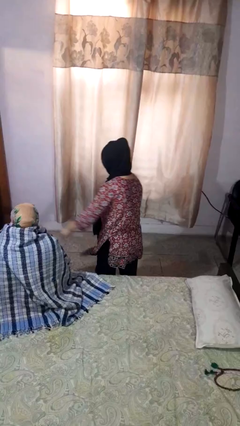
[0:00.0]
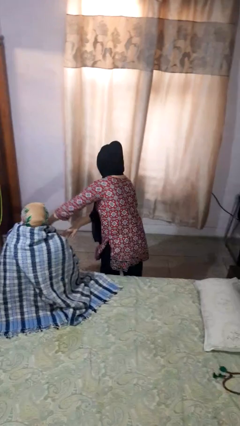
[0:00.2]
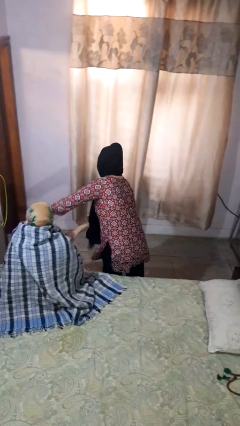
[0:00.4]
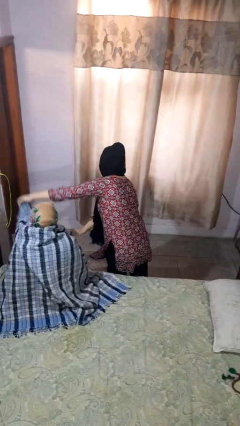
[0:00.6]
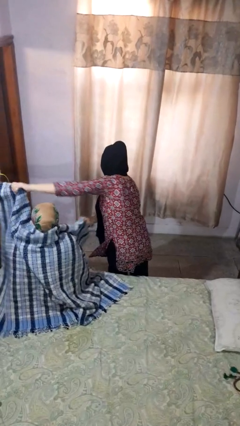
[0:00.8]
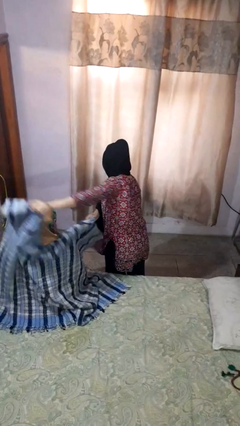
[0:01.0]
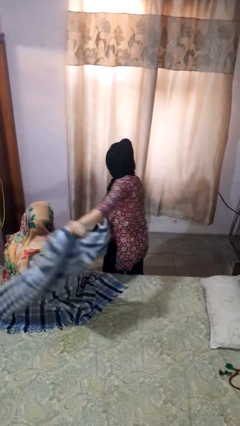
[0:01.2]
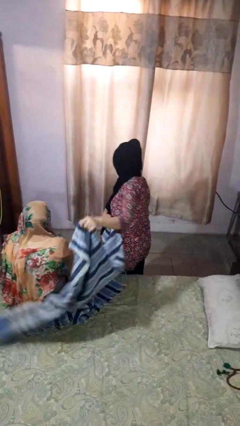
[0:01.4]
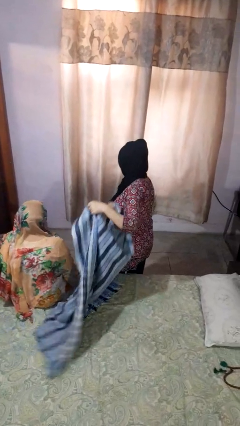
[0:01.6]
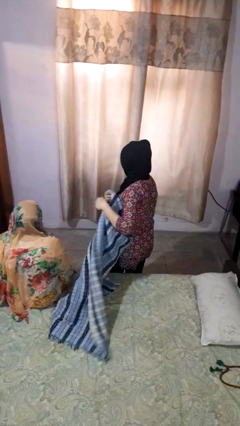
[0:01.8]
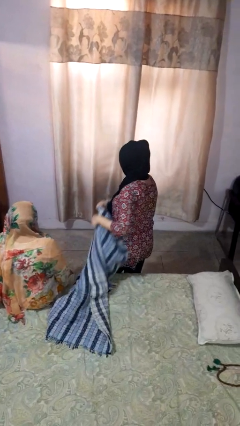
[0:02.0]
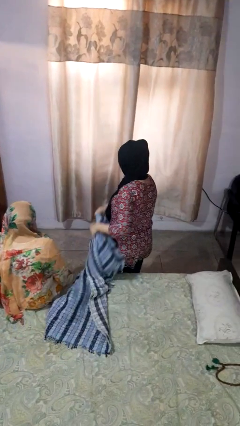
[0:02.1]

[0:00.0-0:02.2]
person uncovers friend with blanket

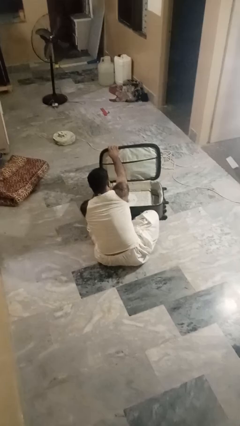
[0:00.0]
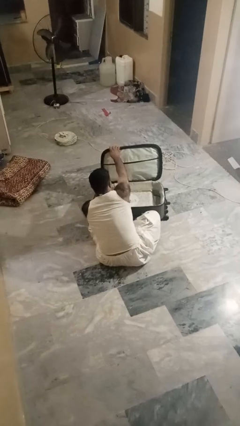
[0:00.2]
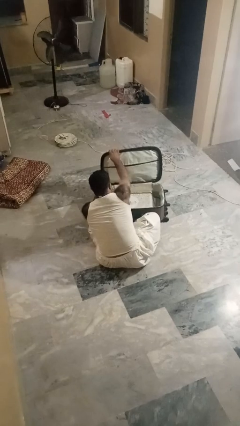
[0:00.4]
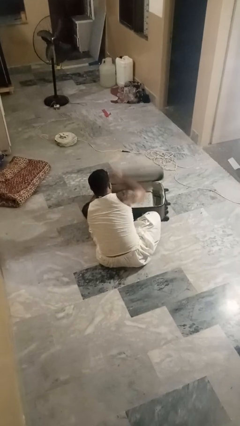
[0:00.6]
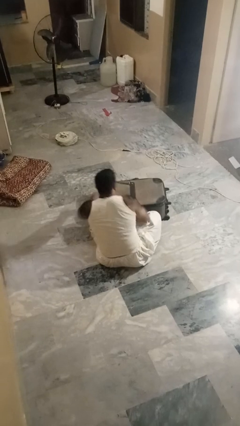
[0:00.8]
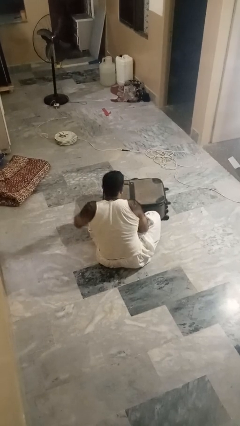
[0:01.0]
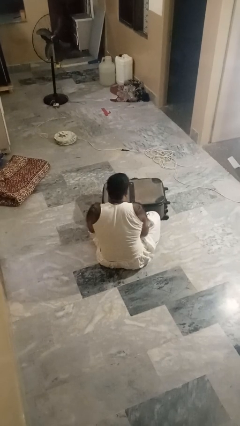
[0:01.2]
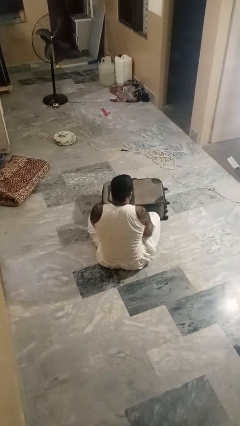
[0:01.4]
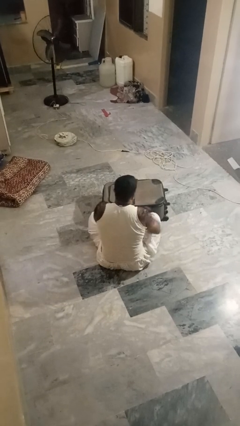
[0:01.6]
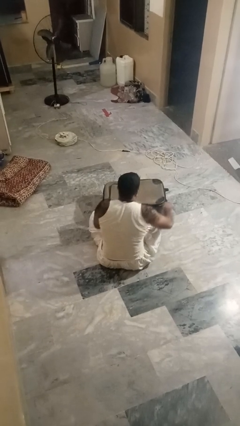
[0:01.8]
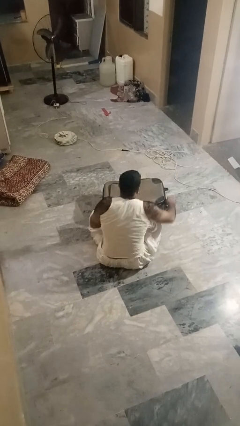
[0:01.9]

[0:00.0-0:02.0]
person closes suitcase

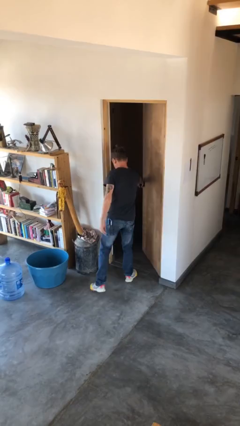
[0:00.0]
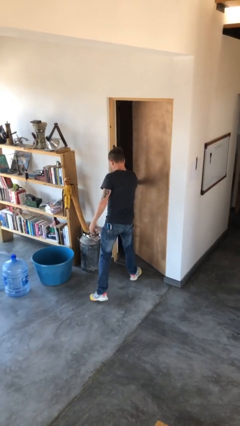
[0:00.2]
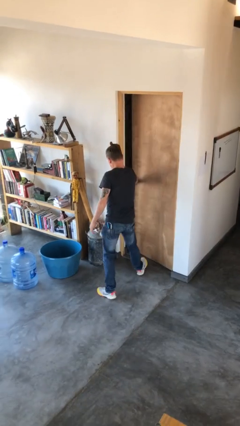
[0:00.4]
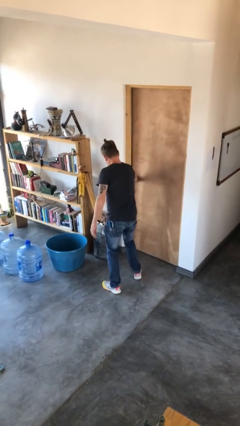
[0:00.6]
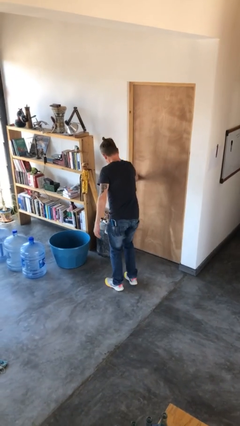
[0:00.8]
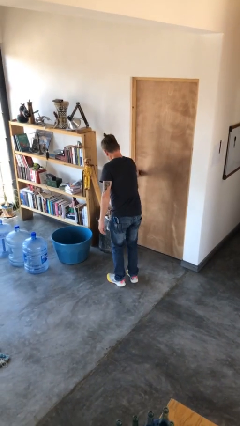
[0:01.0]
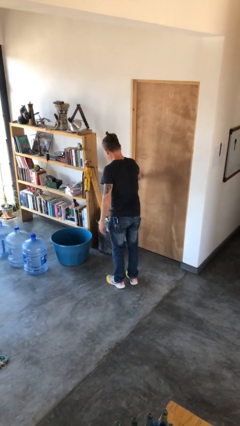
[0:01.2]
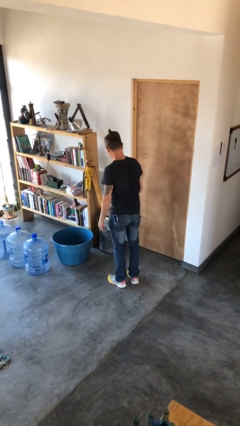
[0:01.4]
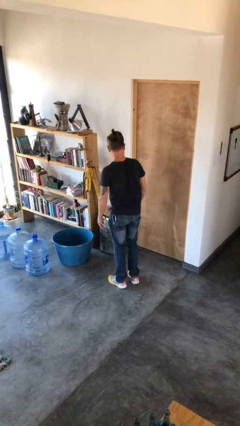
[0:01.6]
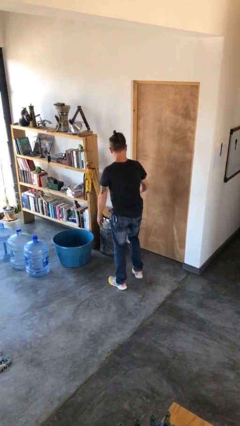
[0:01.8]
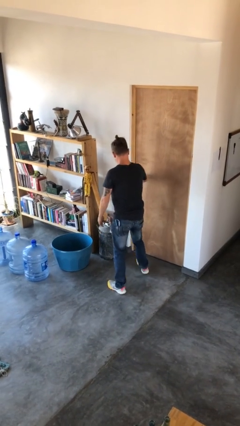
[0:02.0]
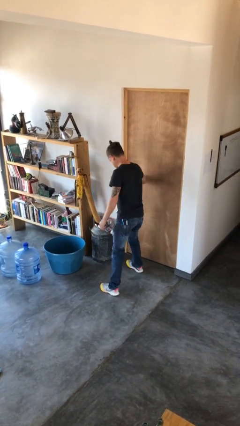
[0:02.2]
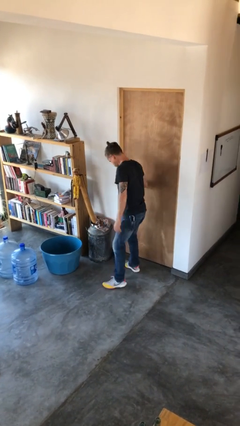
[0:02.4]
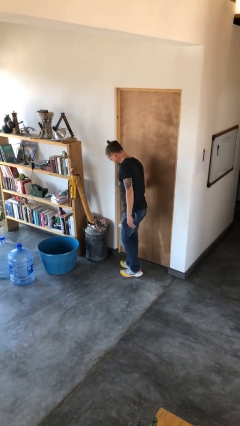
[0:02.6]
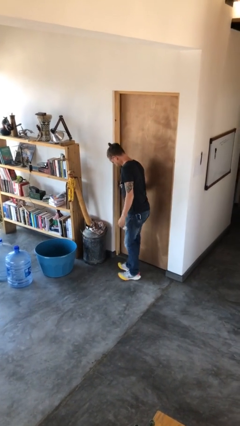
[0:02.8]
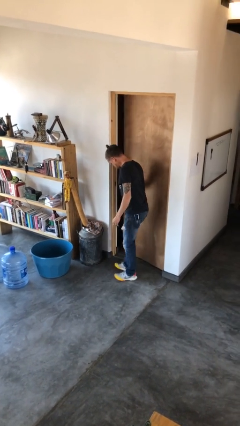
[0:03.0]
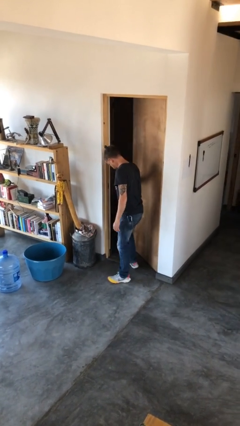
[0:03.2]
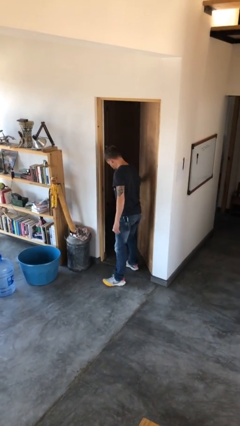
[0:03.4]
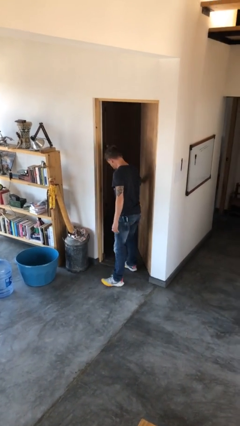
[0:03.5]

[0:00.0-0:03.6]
person opens facility door

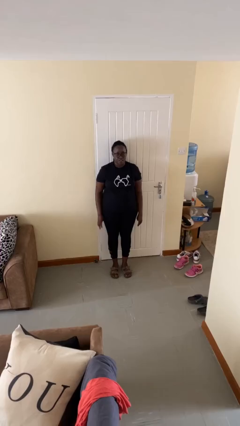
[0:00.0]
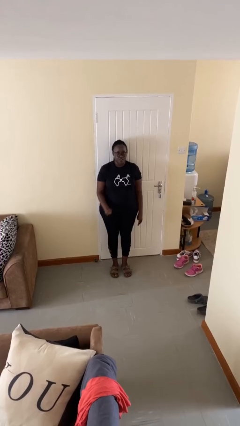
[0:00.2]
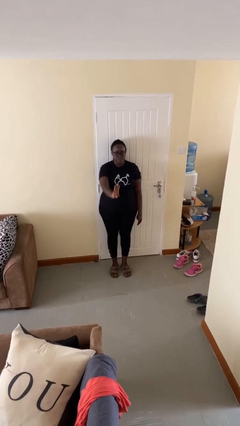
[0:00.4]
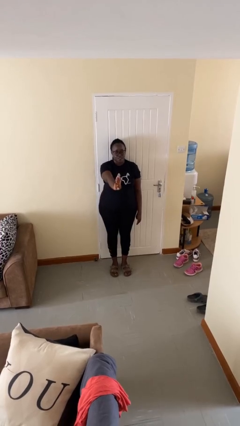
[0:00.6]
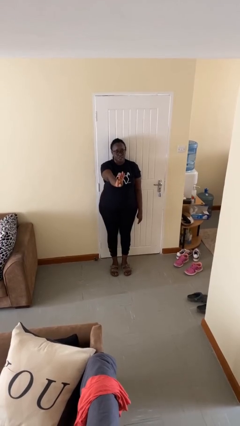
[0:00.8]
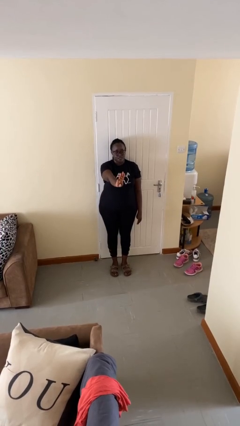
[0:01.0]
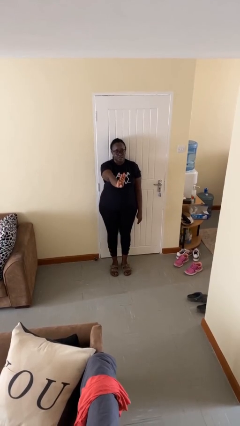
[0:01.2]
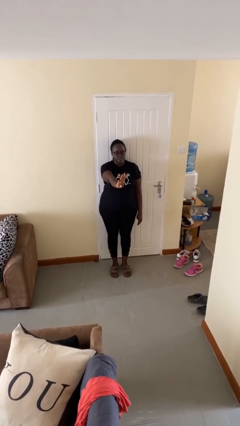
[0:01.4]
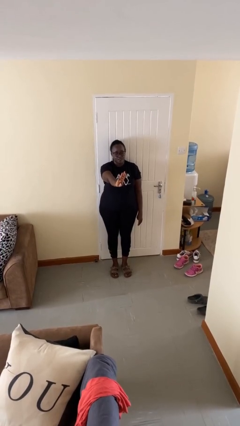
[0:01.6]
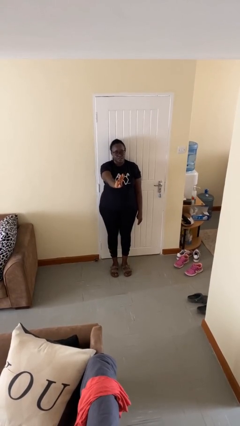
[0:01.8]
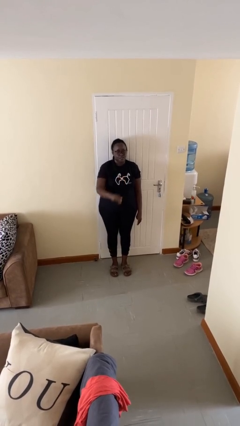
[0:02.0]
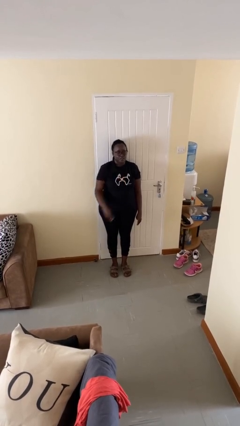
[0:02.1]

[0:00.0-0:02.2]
person gestures number three

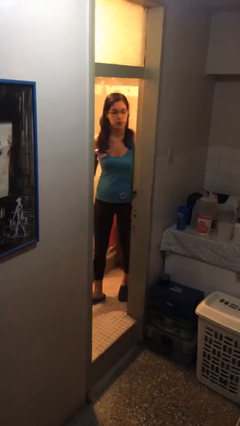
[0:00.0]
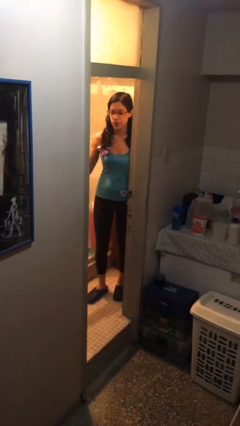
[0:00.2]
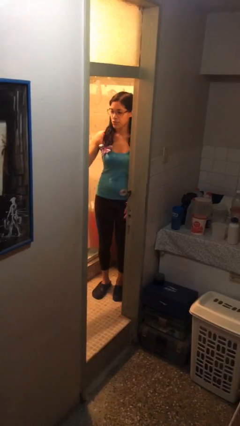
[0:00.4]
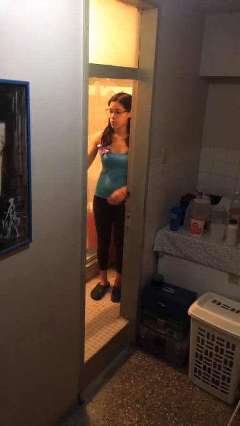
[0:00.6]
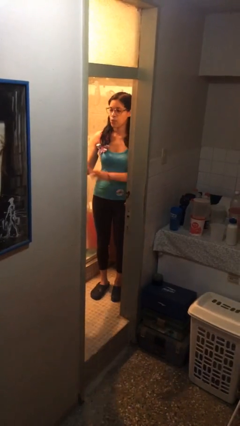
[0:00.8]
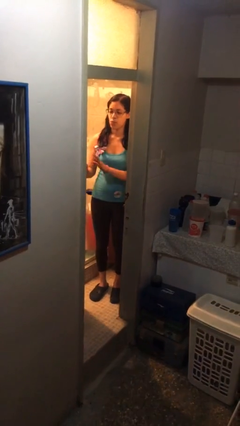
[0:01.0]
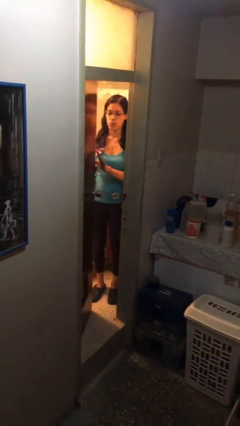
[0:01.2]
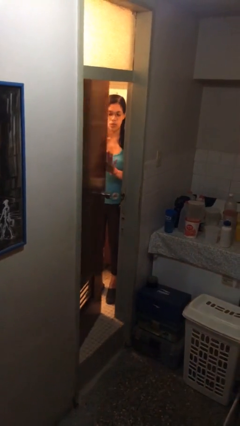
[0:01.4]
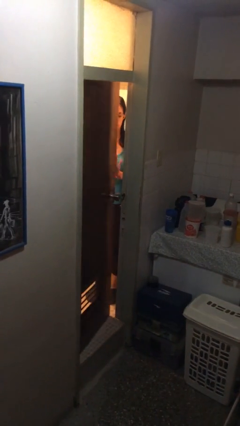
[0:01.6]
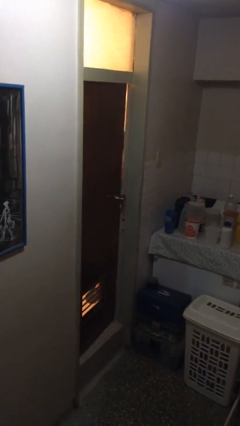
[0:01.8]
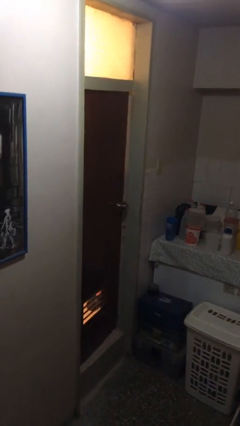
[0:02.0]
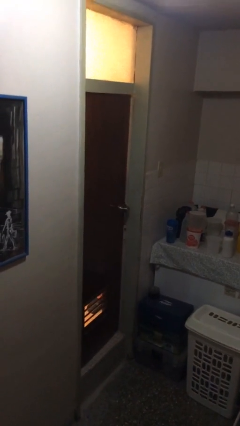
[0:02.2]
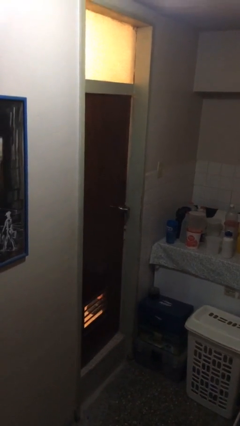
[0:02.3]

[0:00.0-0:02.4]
person closes facility door

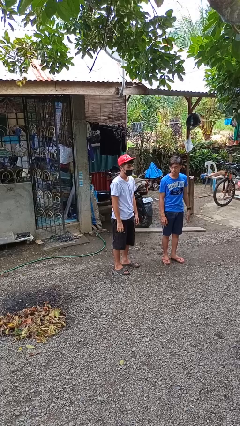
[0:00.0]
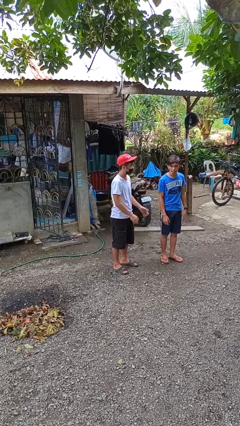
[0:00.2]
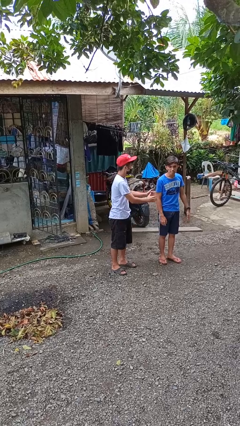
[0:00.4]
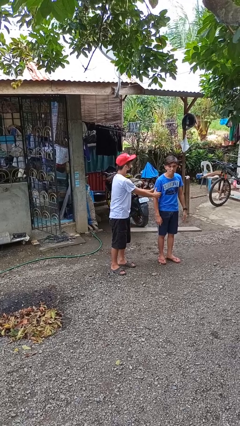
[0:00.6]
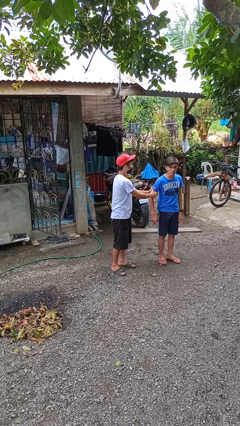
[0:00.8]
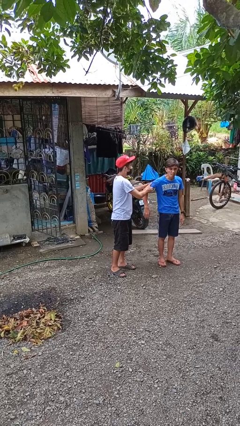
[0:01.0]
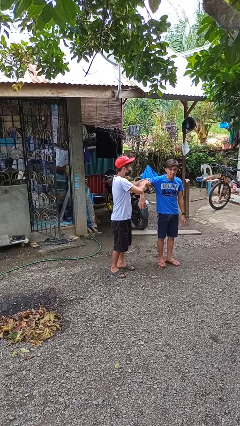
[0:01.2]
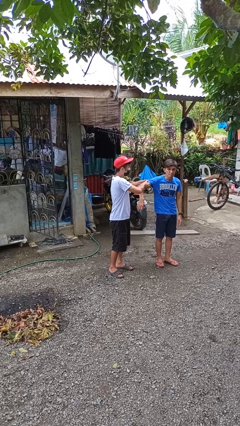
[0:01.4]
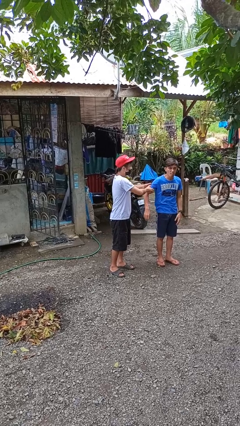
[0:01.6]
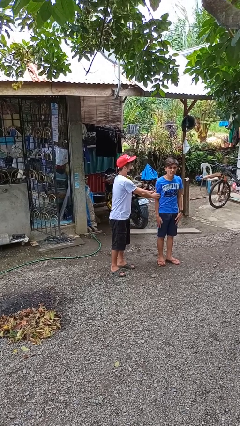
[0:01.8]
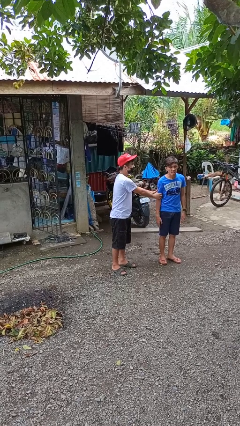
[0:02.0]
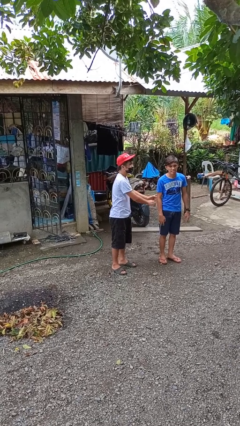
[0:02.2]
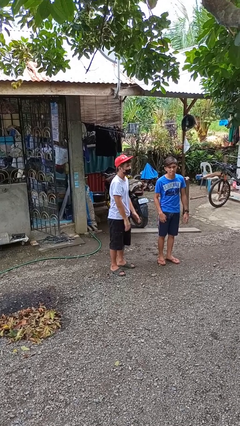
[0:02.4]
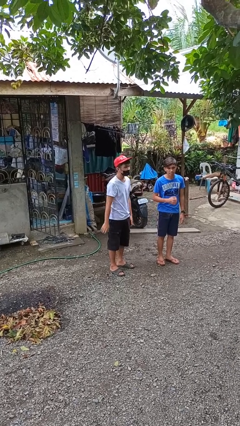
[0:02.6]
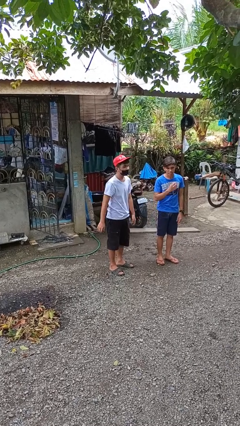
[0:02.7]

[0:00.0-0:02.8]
person grabs person by bicep

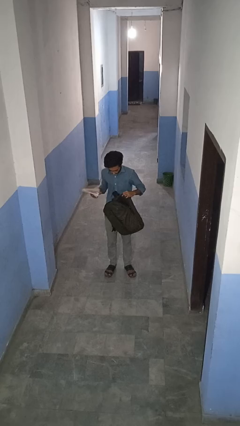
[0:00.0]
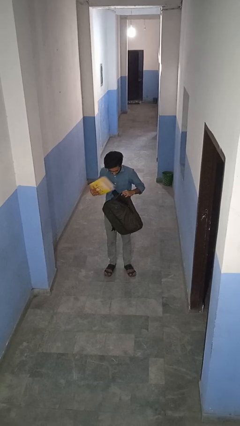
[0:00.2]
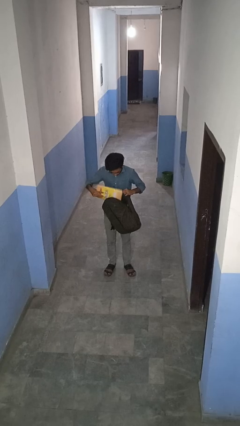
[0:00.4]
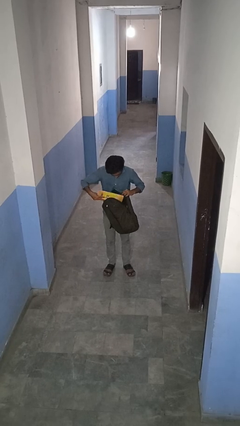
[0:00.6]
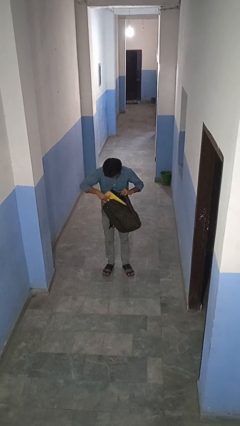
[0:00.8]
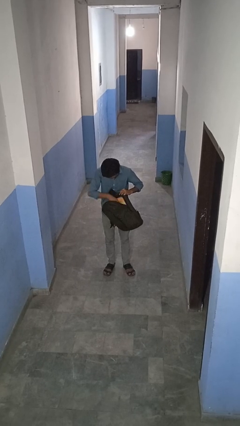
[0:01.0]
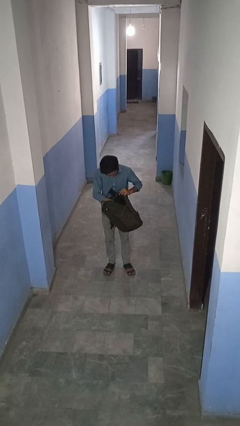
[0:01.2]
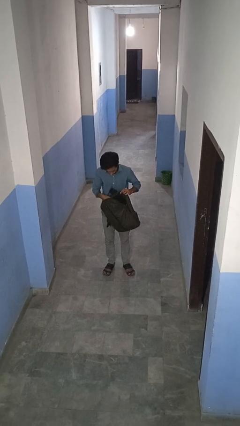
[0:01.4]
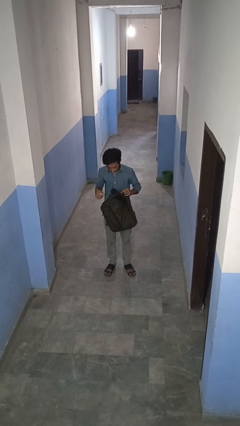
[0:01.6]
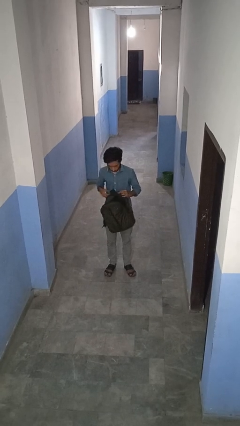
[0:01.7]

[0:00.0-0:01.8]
person puts object into backpack
